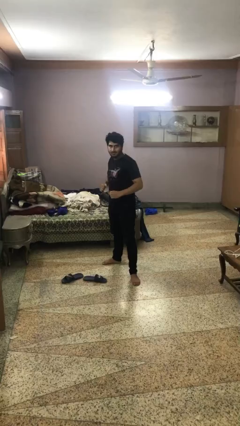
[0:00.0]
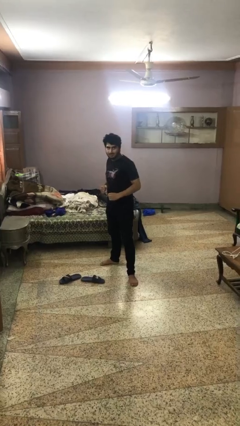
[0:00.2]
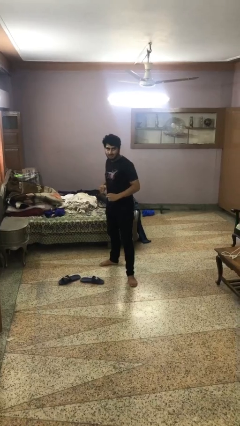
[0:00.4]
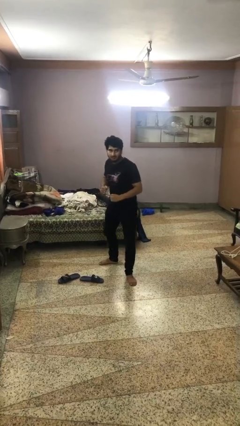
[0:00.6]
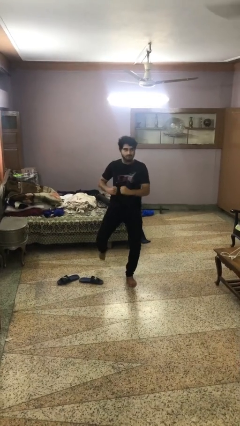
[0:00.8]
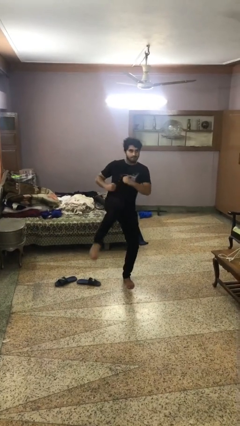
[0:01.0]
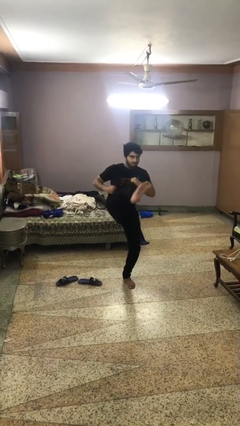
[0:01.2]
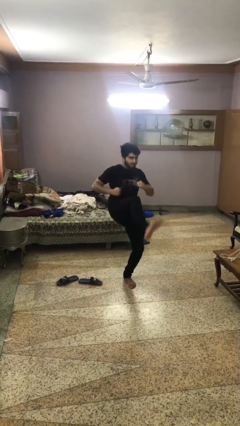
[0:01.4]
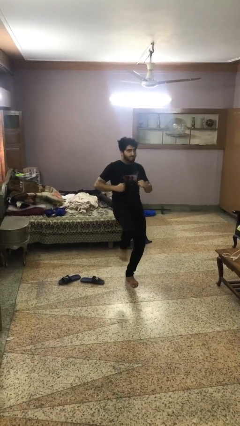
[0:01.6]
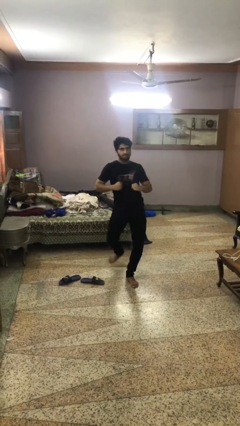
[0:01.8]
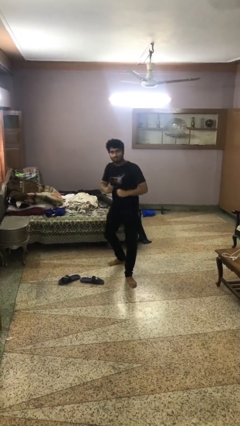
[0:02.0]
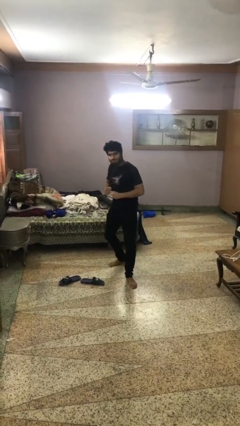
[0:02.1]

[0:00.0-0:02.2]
person karate kicks

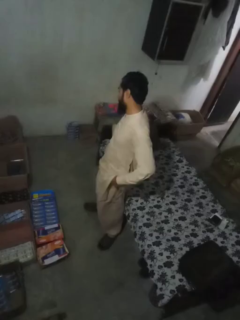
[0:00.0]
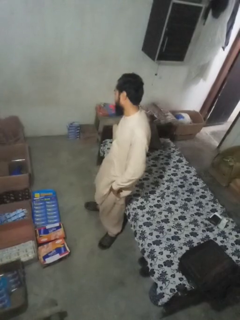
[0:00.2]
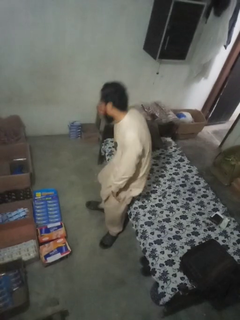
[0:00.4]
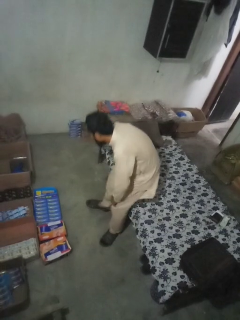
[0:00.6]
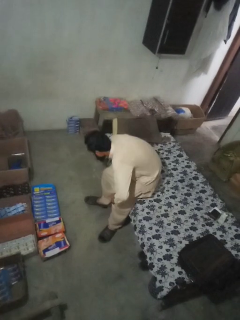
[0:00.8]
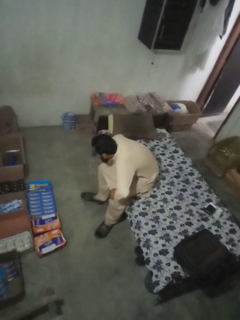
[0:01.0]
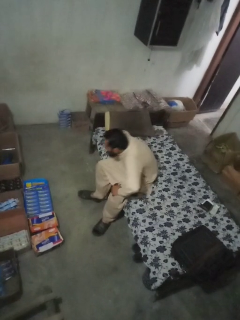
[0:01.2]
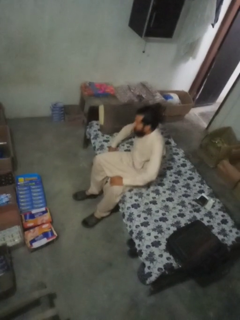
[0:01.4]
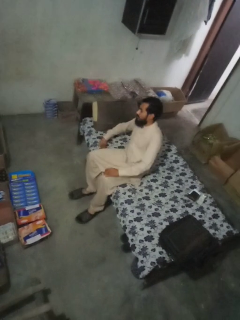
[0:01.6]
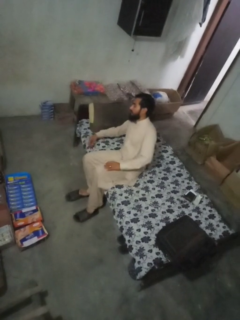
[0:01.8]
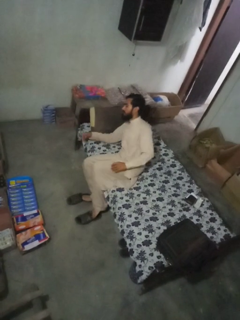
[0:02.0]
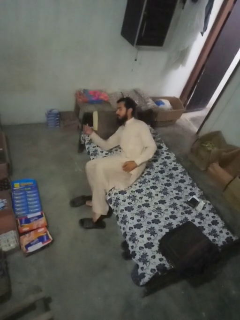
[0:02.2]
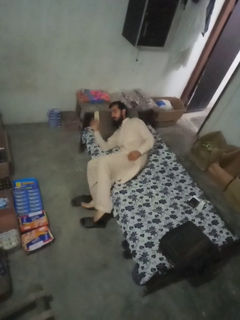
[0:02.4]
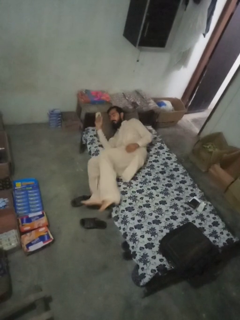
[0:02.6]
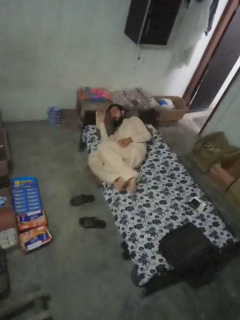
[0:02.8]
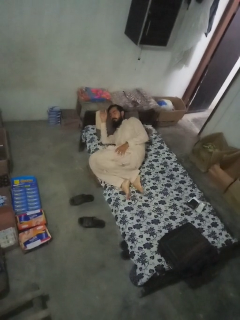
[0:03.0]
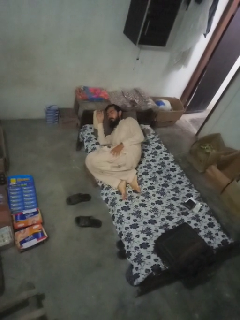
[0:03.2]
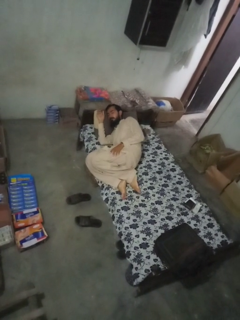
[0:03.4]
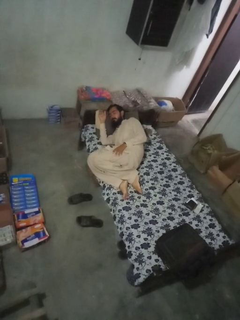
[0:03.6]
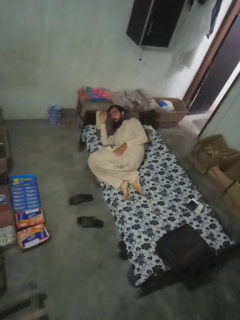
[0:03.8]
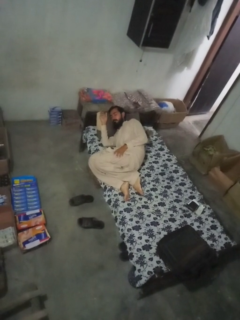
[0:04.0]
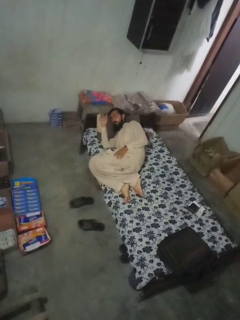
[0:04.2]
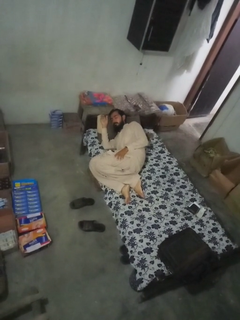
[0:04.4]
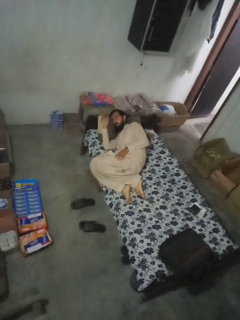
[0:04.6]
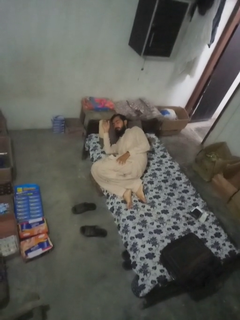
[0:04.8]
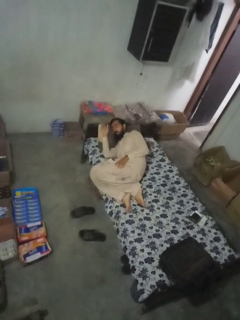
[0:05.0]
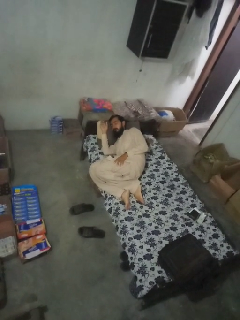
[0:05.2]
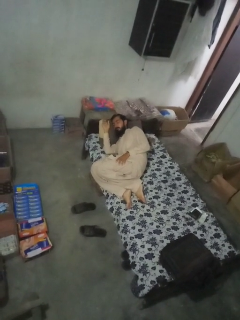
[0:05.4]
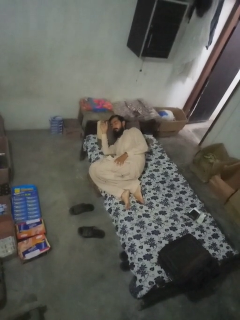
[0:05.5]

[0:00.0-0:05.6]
person lies down on bed

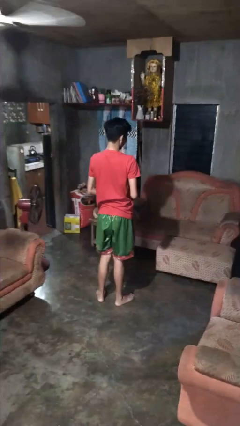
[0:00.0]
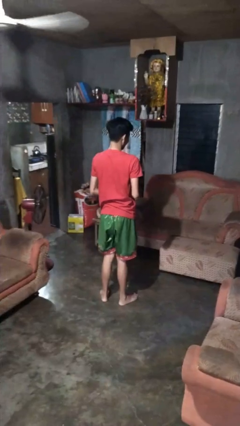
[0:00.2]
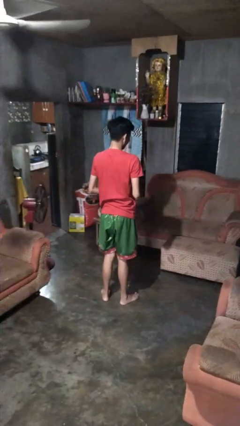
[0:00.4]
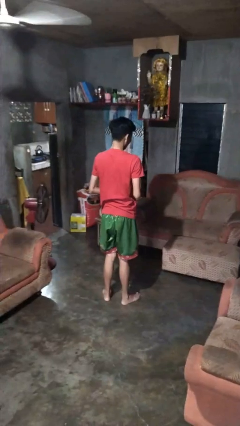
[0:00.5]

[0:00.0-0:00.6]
person bounces ball on floor

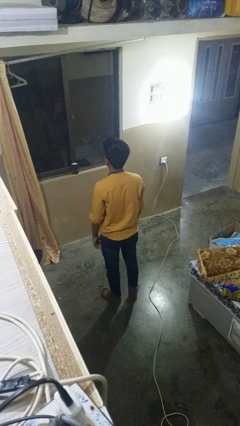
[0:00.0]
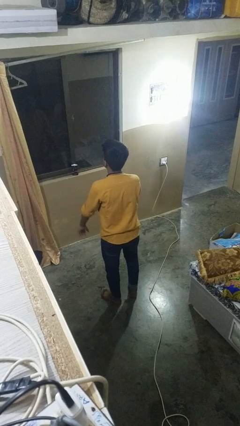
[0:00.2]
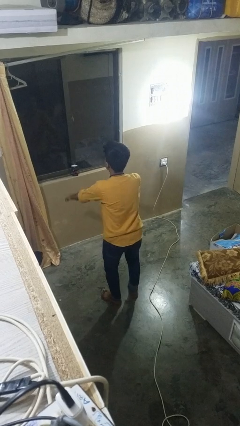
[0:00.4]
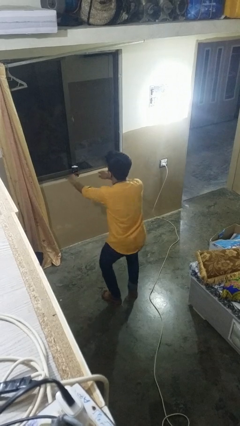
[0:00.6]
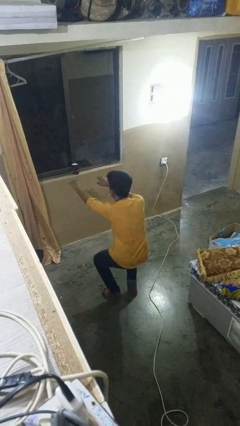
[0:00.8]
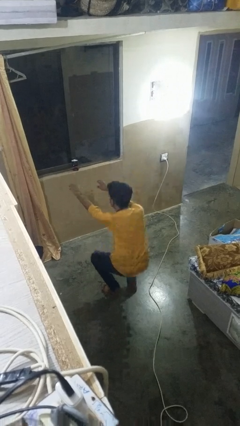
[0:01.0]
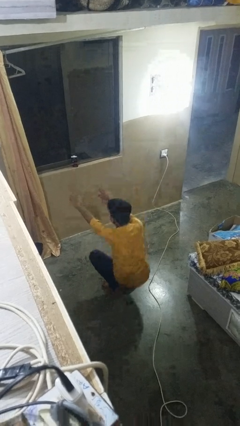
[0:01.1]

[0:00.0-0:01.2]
person squats

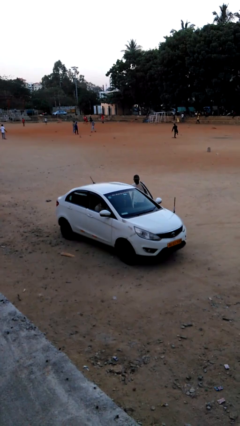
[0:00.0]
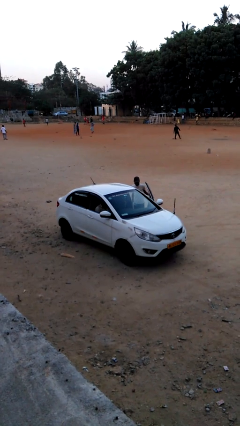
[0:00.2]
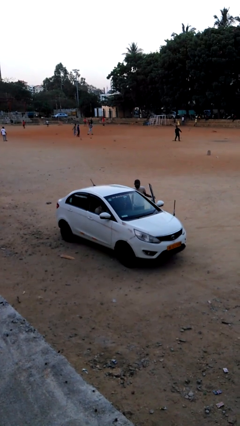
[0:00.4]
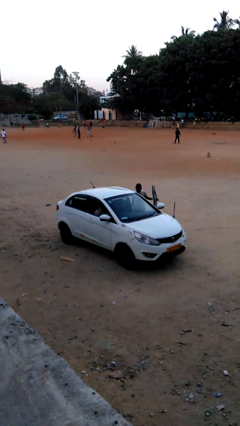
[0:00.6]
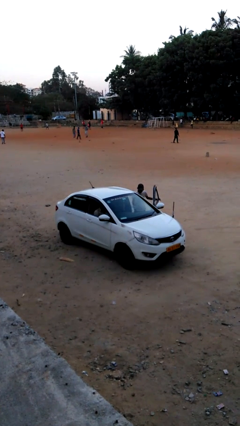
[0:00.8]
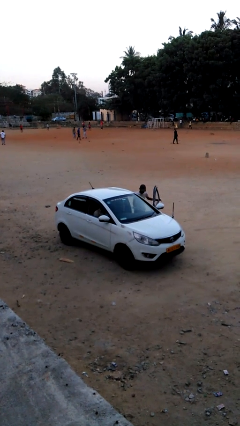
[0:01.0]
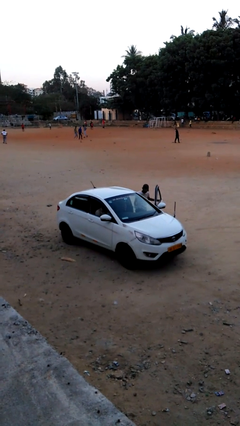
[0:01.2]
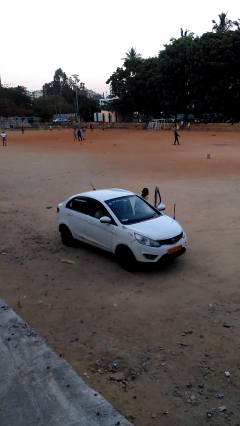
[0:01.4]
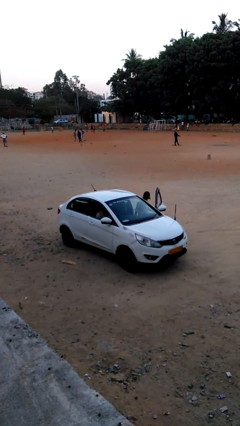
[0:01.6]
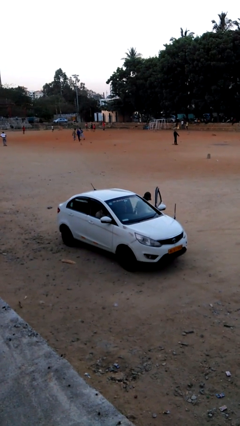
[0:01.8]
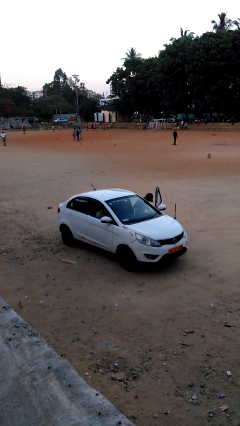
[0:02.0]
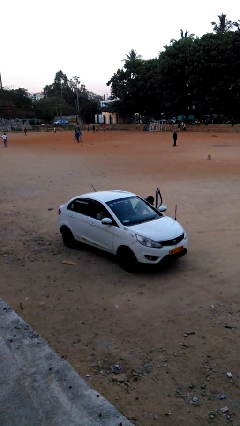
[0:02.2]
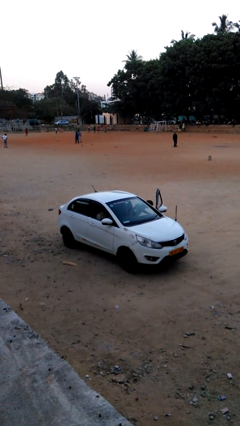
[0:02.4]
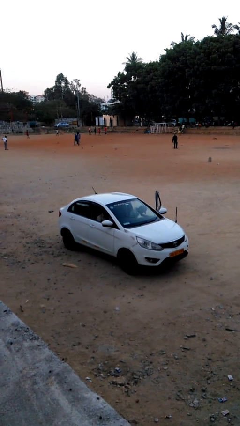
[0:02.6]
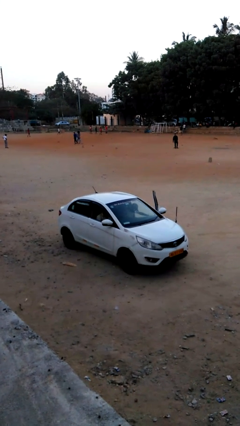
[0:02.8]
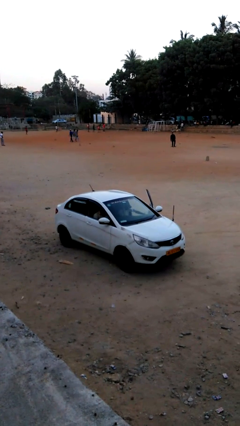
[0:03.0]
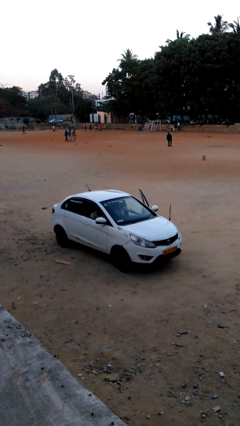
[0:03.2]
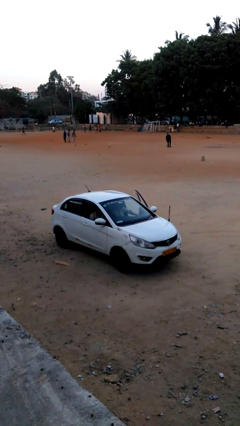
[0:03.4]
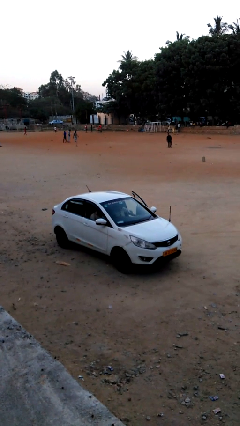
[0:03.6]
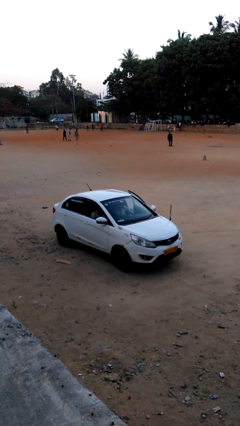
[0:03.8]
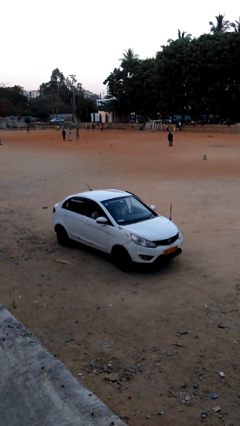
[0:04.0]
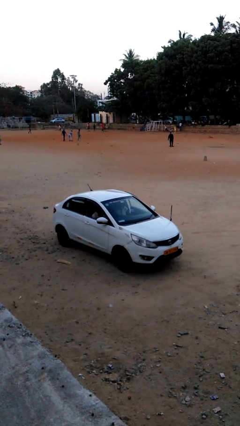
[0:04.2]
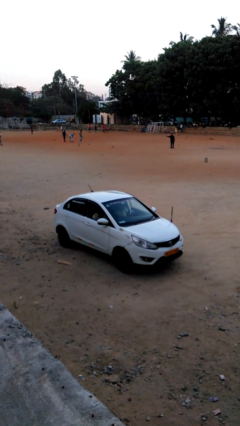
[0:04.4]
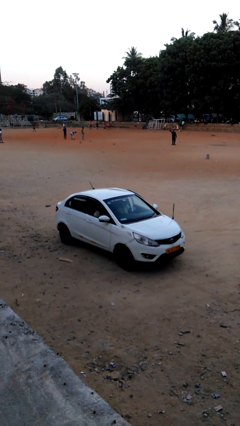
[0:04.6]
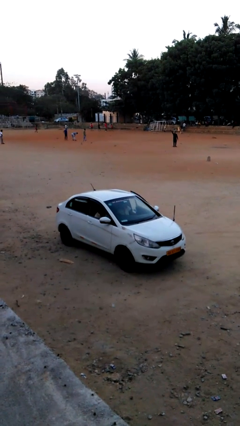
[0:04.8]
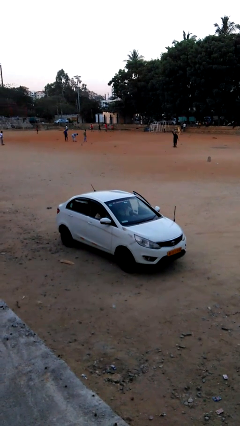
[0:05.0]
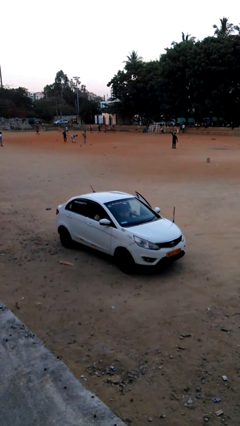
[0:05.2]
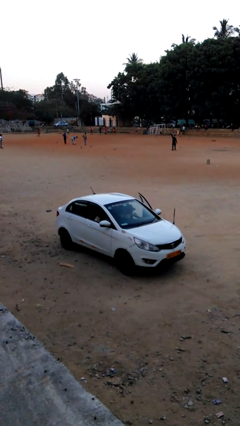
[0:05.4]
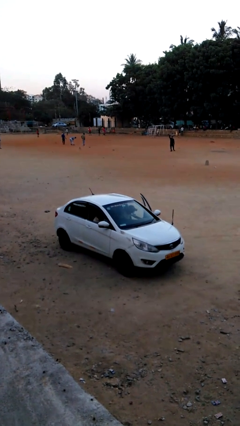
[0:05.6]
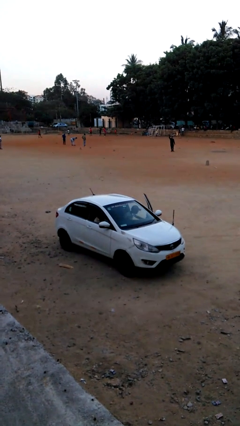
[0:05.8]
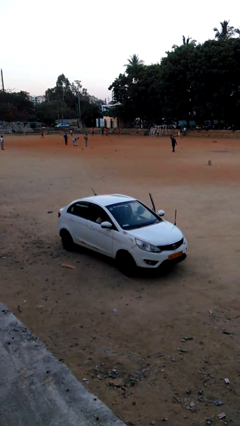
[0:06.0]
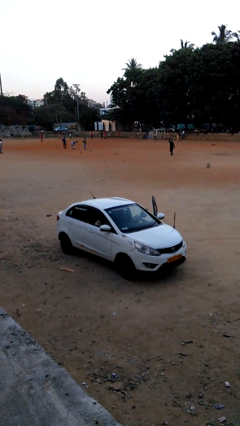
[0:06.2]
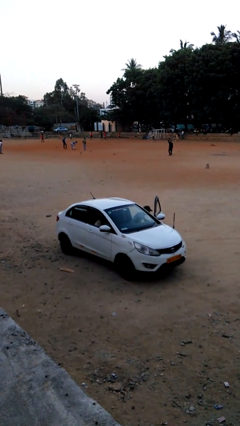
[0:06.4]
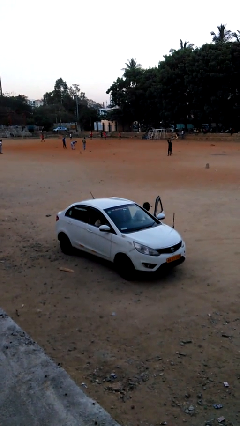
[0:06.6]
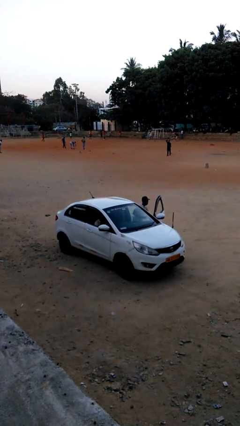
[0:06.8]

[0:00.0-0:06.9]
car picks up person

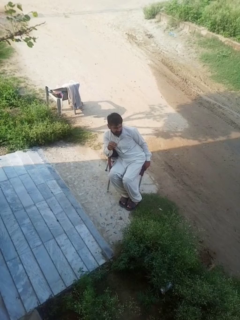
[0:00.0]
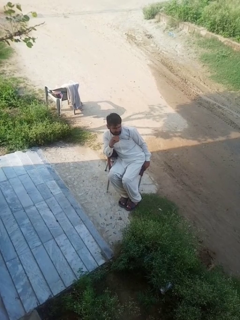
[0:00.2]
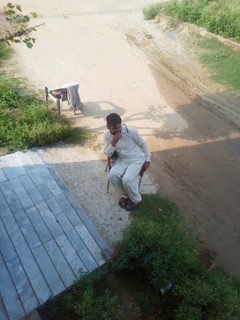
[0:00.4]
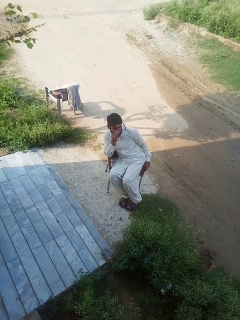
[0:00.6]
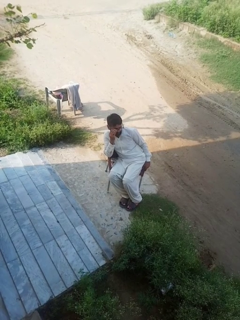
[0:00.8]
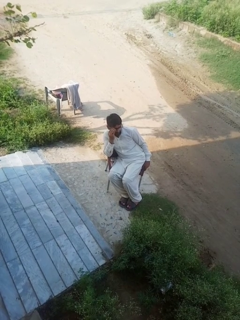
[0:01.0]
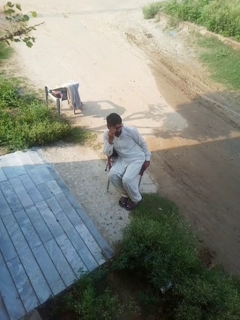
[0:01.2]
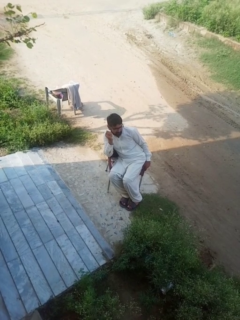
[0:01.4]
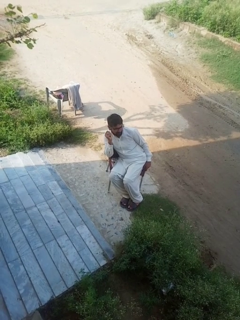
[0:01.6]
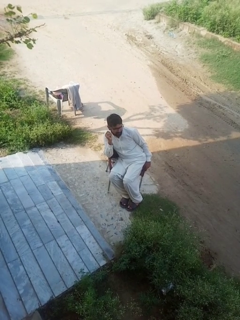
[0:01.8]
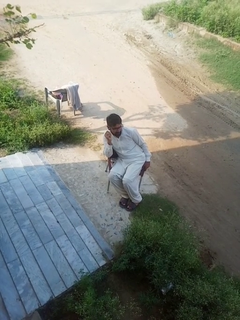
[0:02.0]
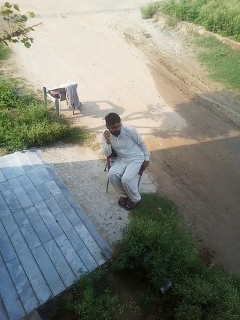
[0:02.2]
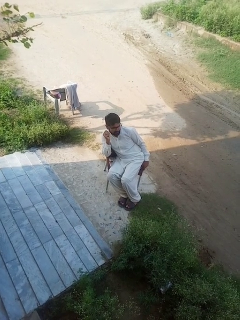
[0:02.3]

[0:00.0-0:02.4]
person puts on glasses

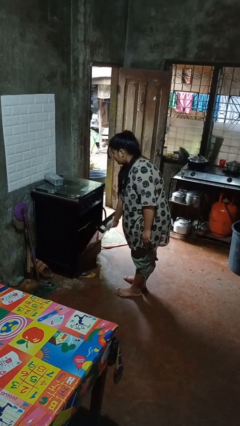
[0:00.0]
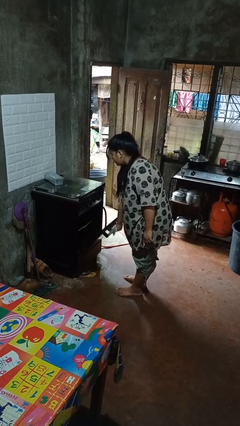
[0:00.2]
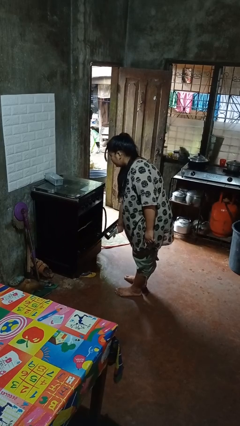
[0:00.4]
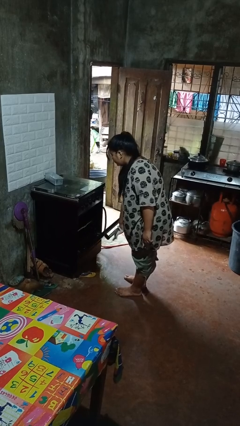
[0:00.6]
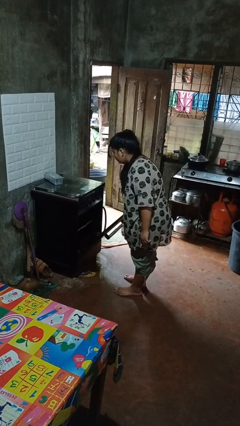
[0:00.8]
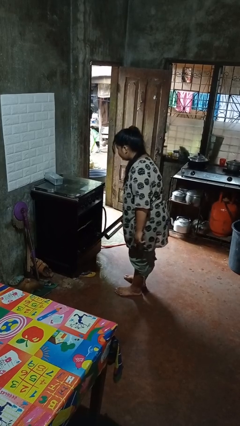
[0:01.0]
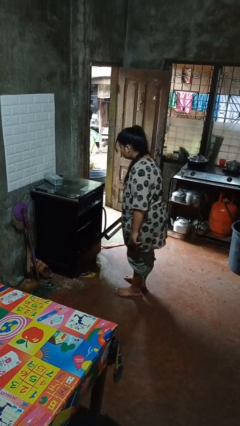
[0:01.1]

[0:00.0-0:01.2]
person opens oven door
